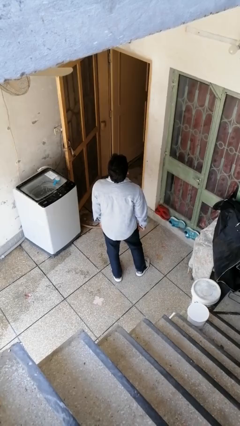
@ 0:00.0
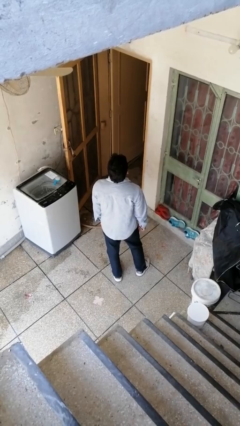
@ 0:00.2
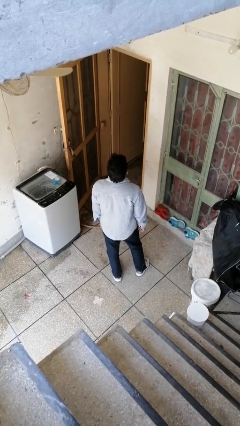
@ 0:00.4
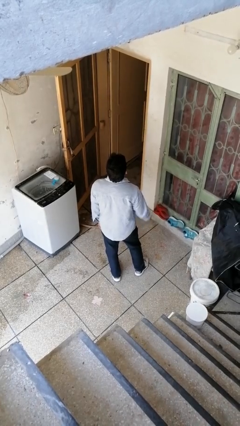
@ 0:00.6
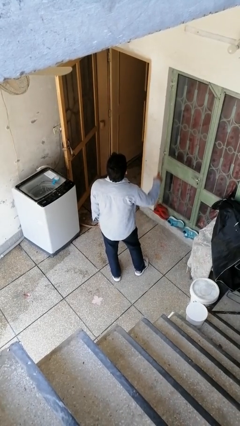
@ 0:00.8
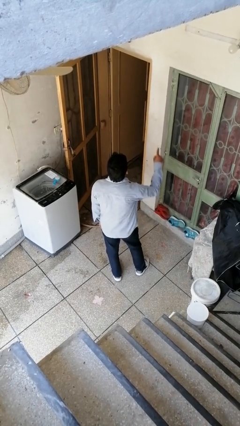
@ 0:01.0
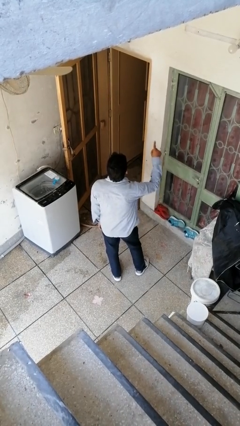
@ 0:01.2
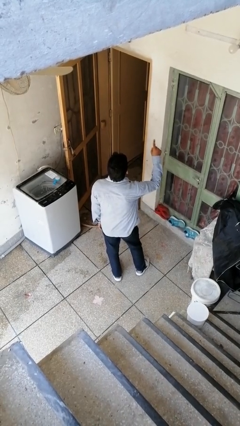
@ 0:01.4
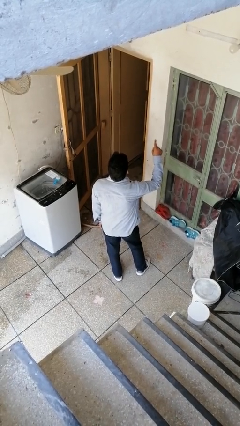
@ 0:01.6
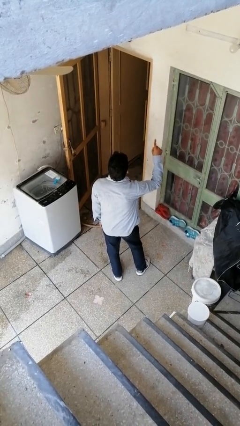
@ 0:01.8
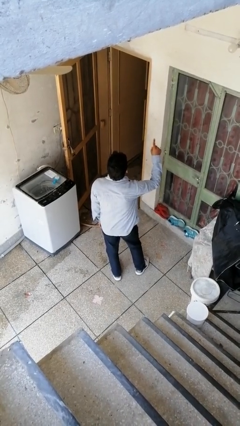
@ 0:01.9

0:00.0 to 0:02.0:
person gestures number one

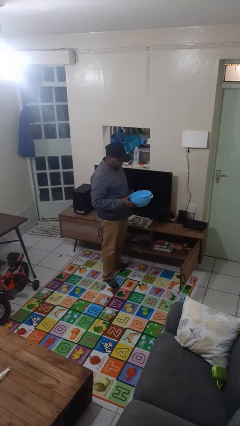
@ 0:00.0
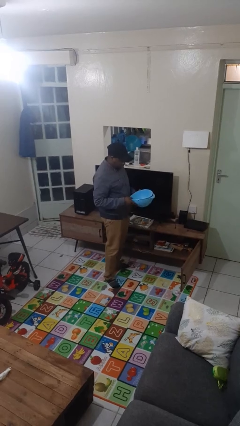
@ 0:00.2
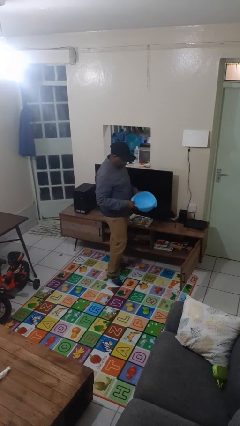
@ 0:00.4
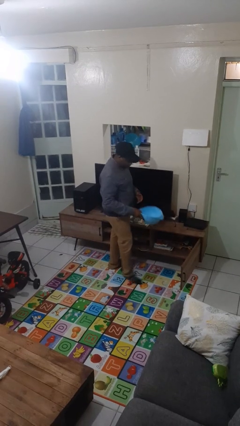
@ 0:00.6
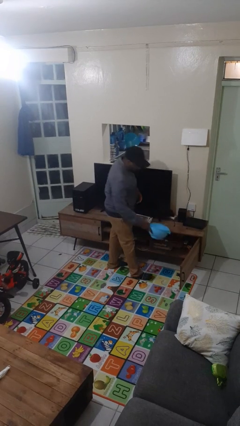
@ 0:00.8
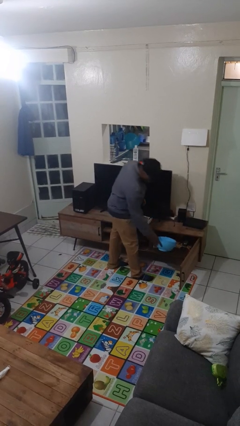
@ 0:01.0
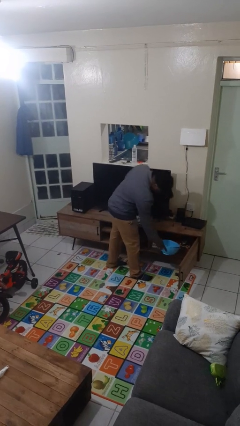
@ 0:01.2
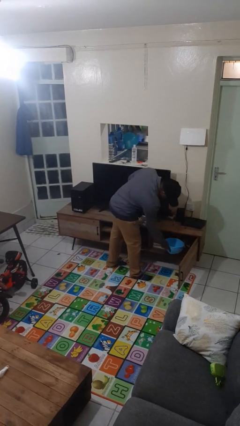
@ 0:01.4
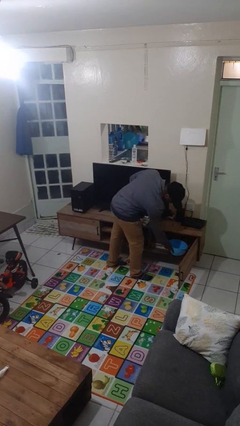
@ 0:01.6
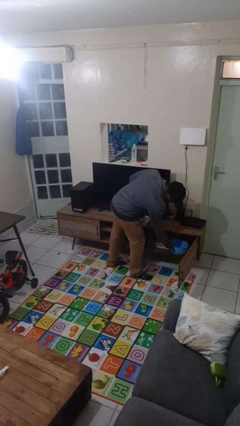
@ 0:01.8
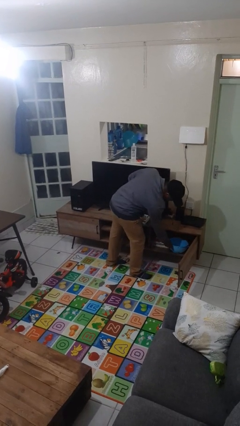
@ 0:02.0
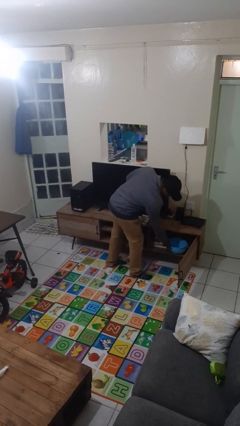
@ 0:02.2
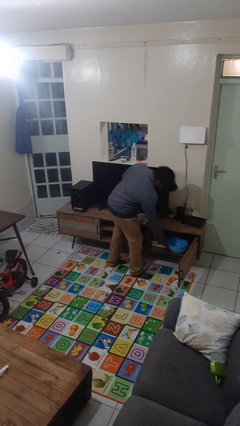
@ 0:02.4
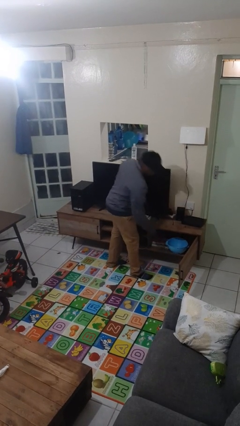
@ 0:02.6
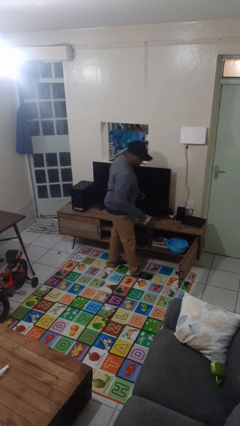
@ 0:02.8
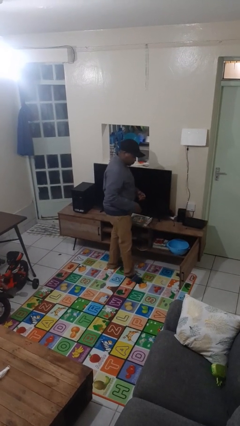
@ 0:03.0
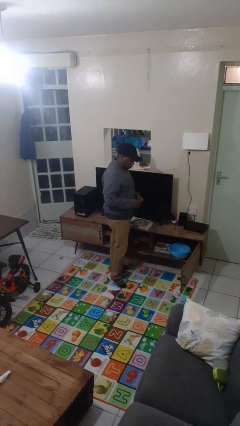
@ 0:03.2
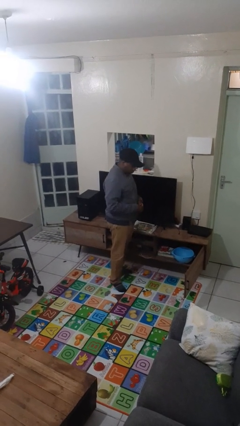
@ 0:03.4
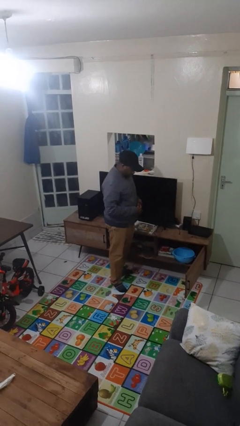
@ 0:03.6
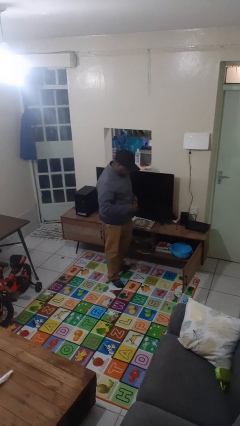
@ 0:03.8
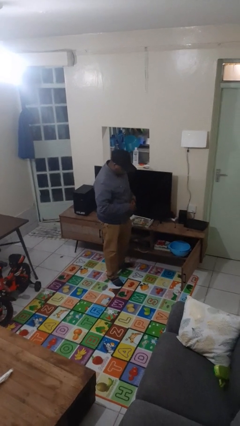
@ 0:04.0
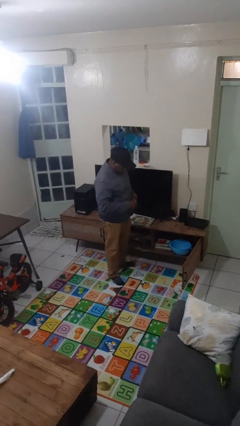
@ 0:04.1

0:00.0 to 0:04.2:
person puts down object into cabinet

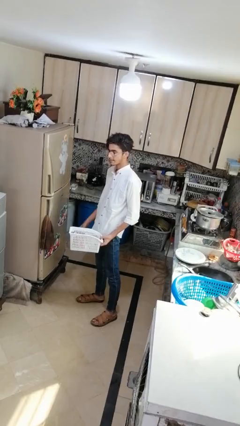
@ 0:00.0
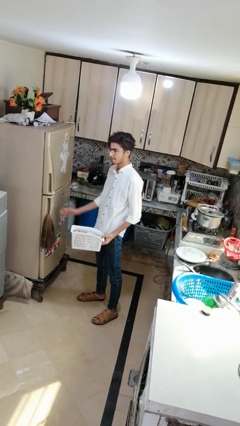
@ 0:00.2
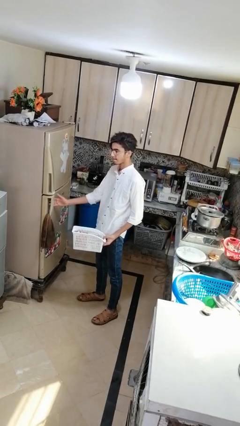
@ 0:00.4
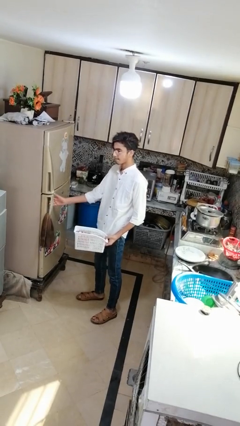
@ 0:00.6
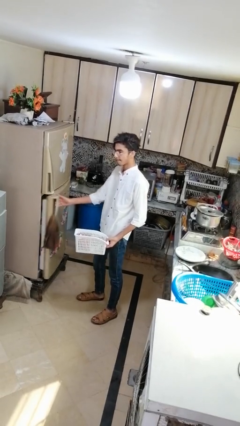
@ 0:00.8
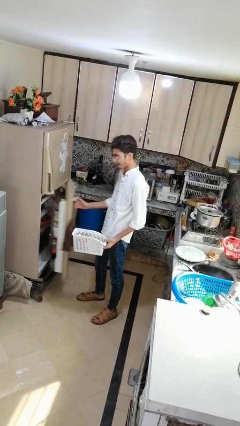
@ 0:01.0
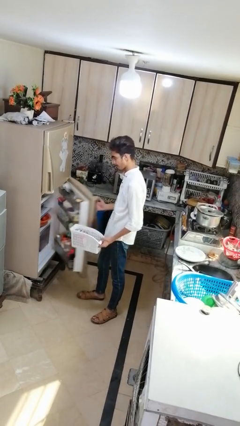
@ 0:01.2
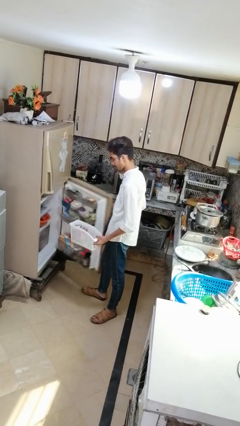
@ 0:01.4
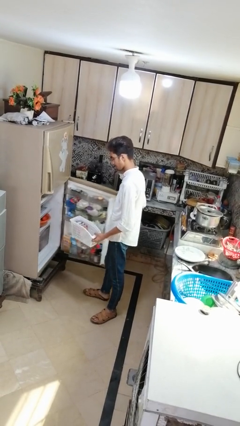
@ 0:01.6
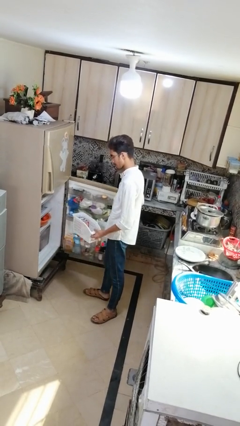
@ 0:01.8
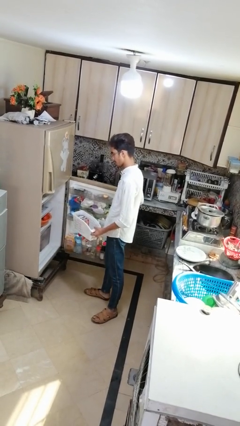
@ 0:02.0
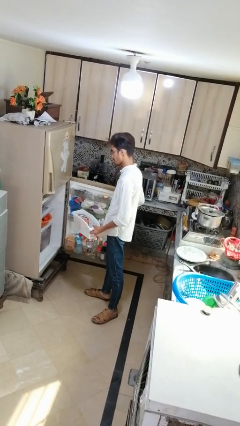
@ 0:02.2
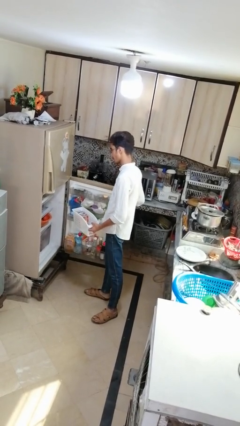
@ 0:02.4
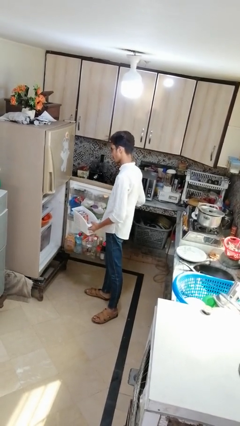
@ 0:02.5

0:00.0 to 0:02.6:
person opens refrigerator

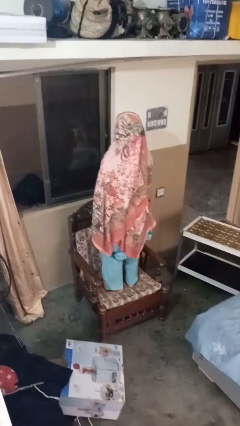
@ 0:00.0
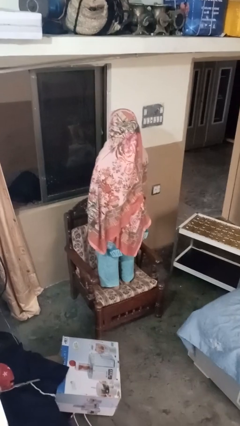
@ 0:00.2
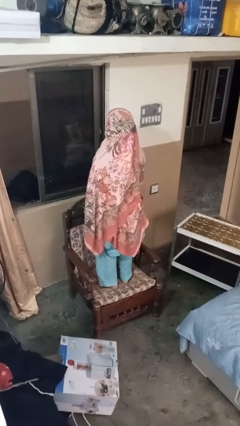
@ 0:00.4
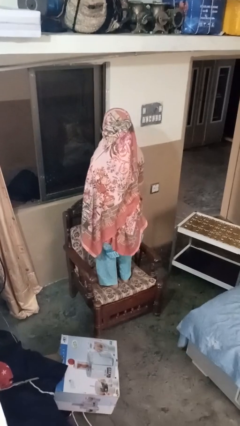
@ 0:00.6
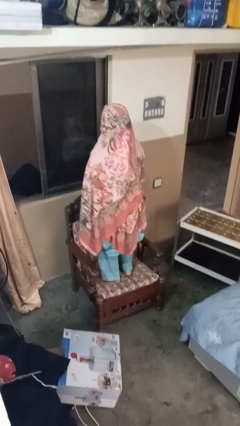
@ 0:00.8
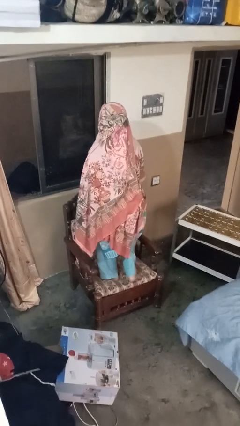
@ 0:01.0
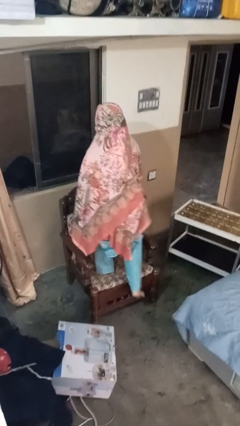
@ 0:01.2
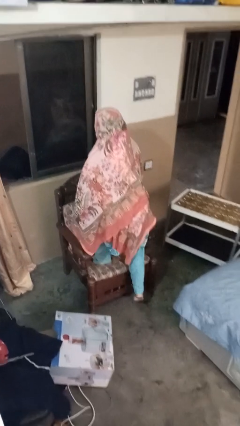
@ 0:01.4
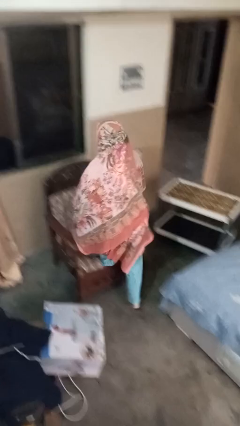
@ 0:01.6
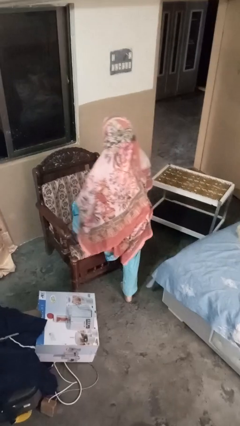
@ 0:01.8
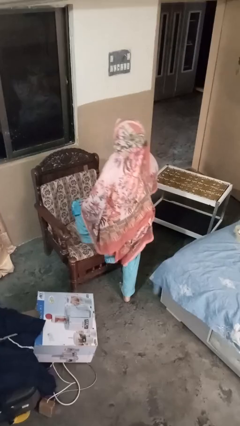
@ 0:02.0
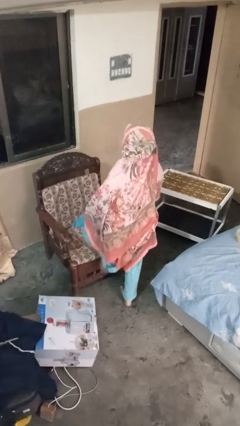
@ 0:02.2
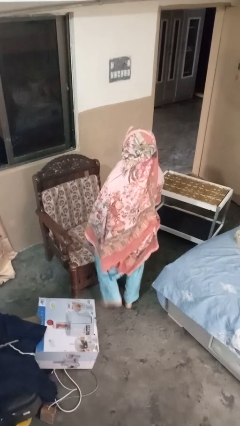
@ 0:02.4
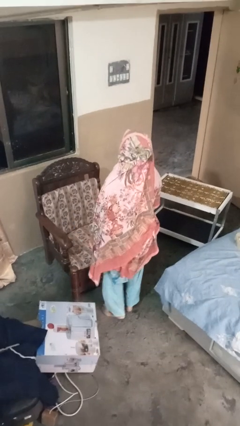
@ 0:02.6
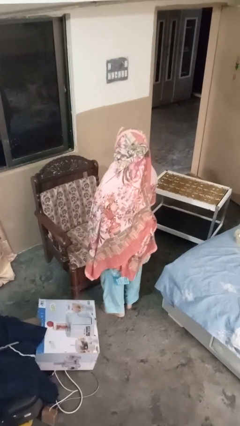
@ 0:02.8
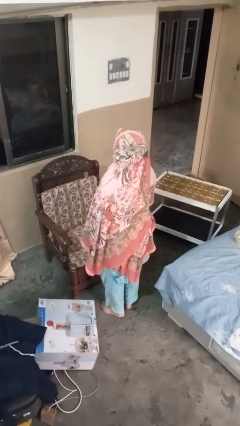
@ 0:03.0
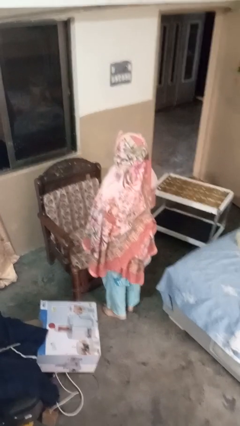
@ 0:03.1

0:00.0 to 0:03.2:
person climbs off couch

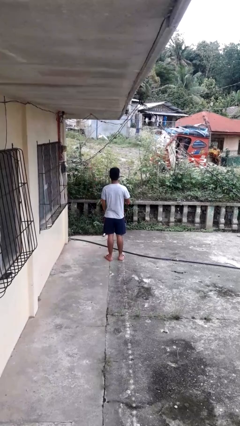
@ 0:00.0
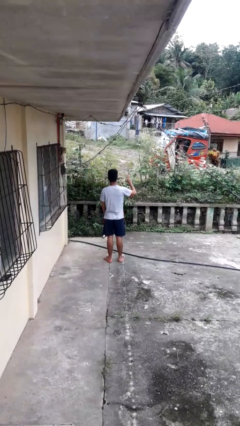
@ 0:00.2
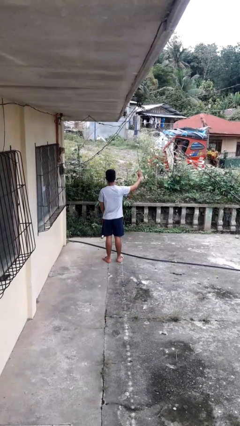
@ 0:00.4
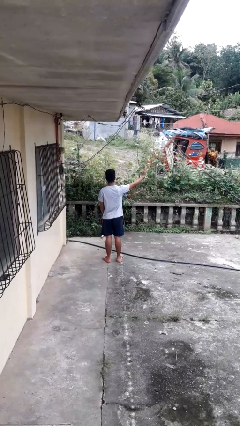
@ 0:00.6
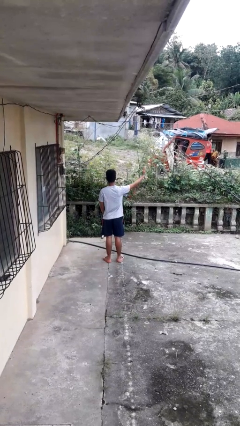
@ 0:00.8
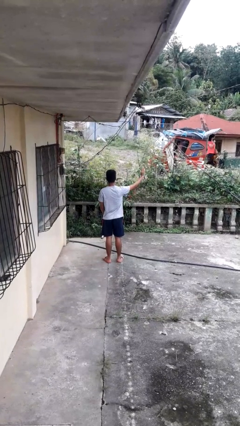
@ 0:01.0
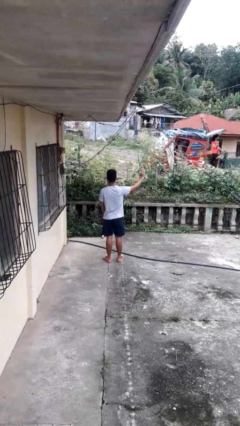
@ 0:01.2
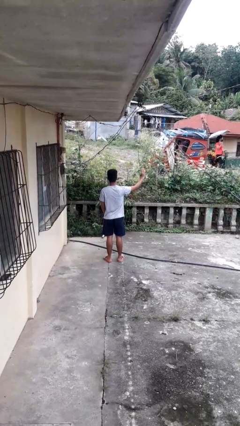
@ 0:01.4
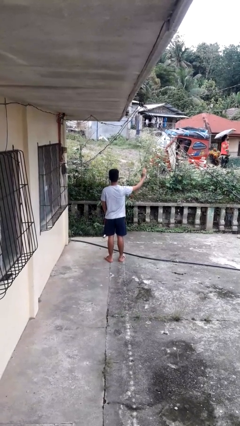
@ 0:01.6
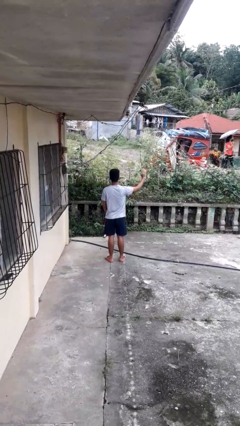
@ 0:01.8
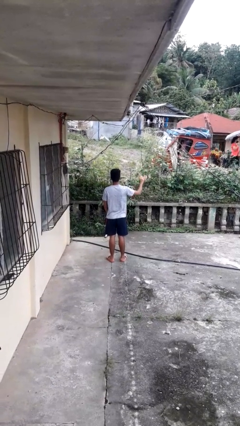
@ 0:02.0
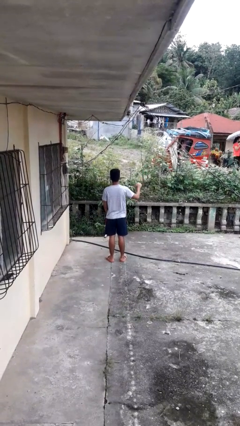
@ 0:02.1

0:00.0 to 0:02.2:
person gestures swipe right

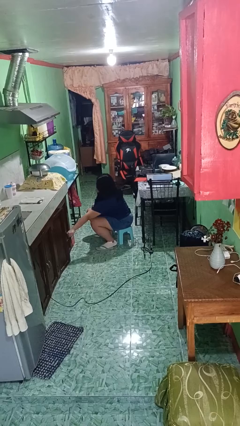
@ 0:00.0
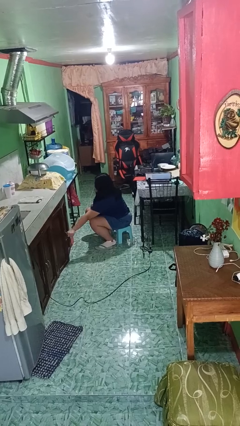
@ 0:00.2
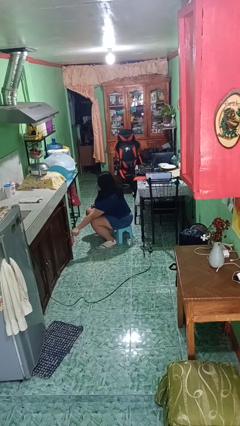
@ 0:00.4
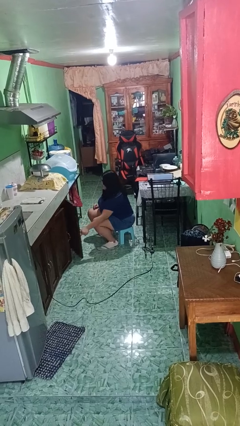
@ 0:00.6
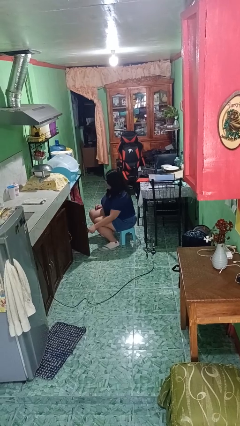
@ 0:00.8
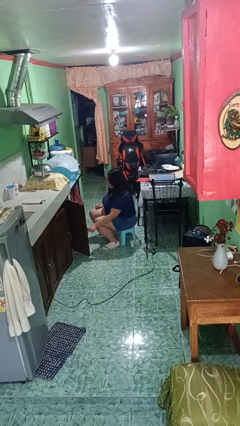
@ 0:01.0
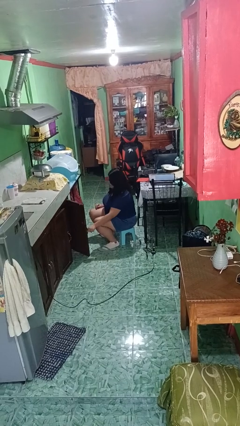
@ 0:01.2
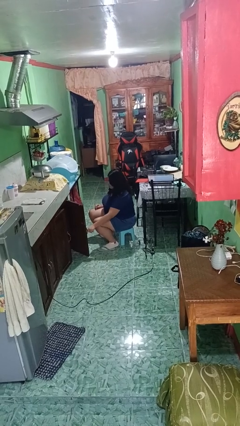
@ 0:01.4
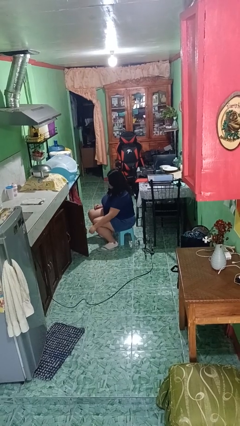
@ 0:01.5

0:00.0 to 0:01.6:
person opens cabinet

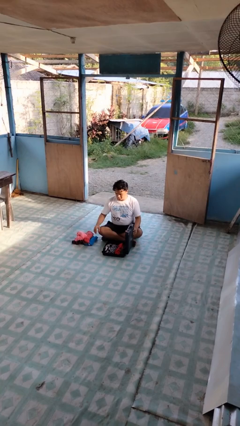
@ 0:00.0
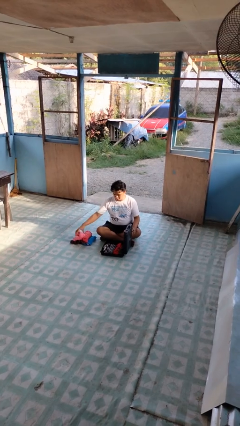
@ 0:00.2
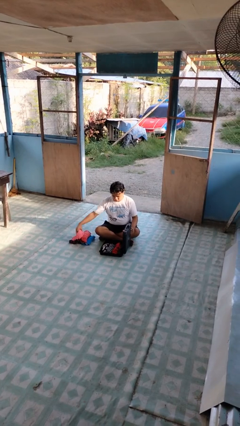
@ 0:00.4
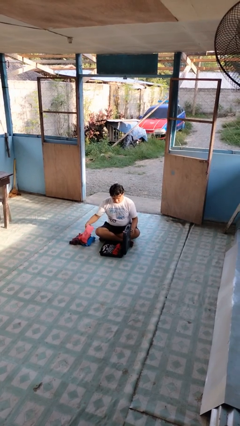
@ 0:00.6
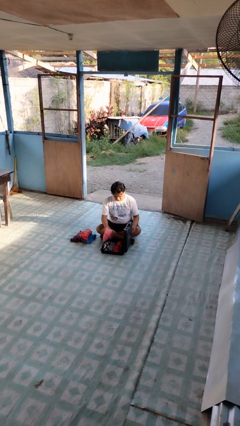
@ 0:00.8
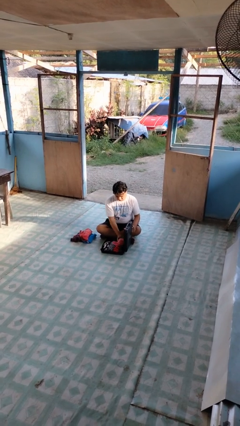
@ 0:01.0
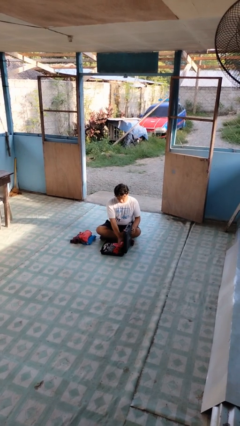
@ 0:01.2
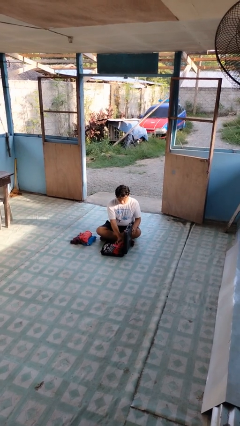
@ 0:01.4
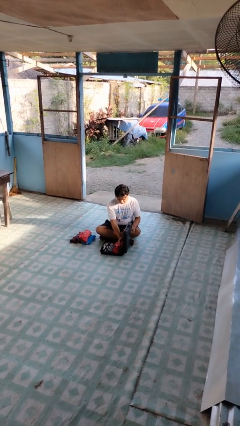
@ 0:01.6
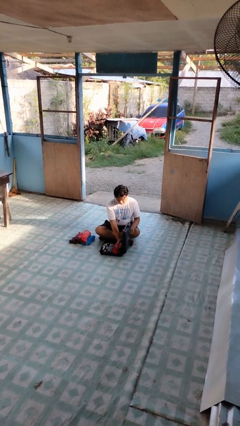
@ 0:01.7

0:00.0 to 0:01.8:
person loads clothes into suitcase
